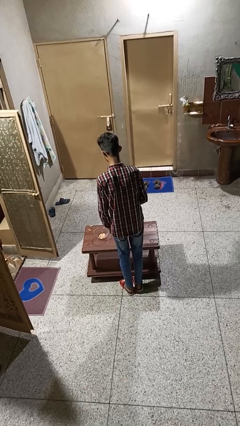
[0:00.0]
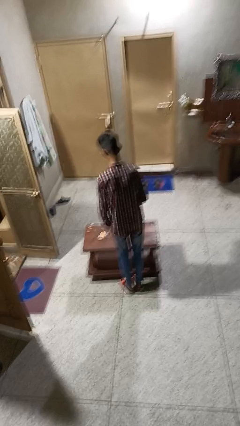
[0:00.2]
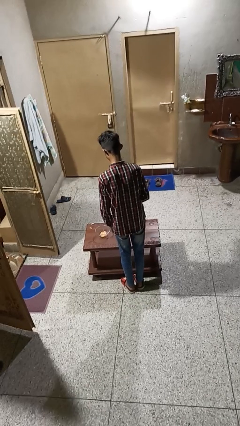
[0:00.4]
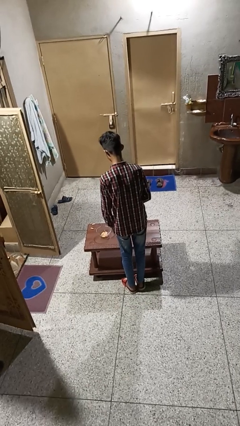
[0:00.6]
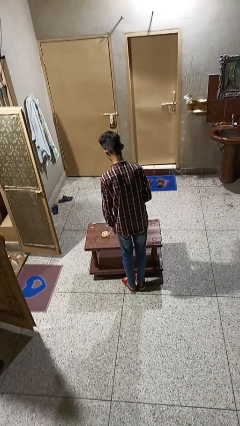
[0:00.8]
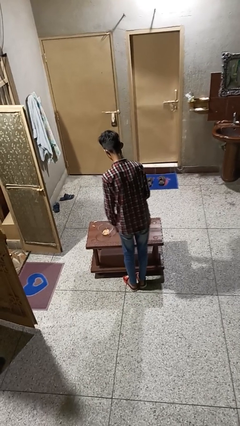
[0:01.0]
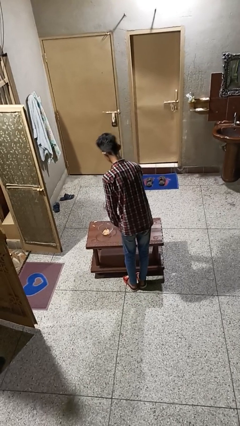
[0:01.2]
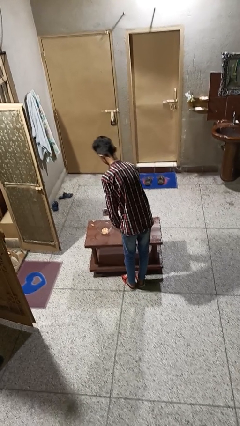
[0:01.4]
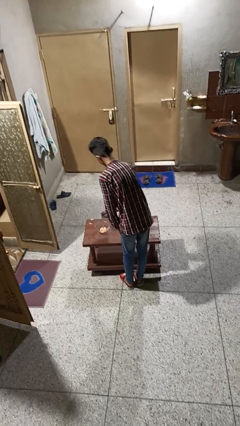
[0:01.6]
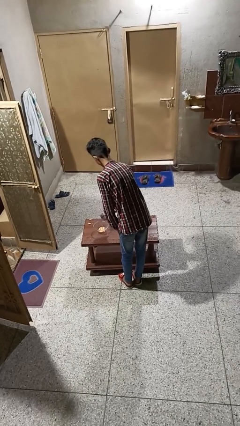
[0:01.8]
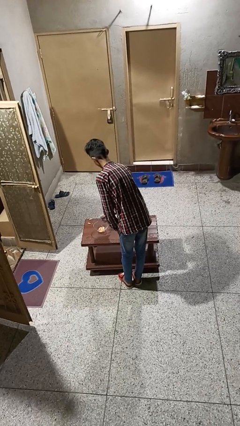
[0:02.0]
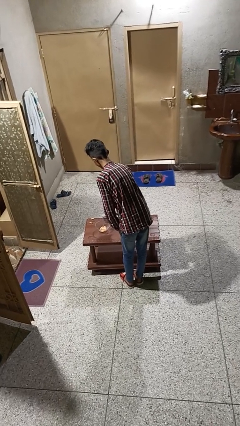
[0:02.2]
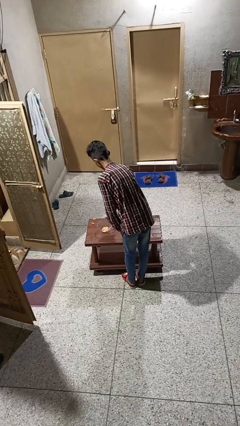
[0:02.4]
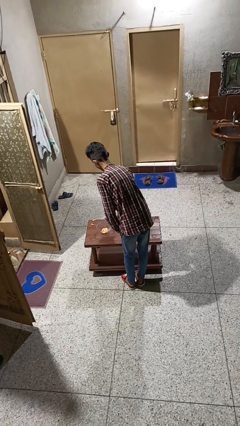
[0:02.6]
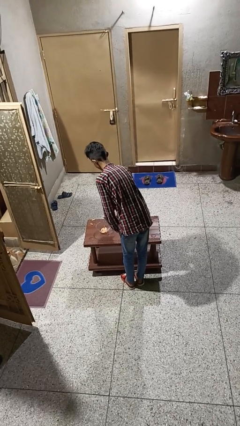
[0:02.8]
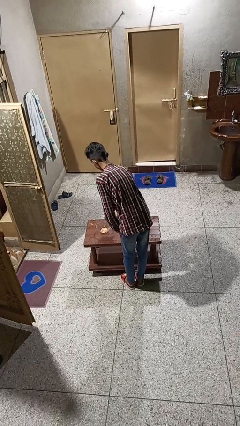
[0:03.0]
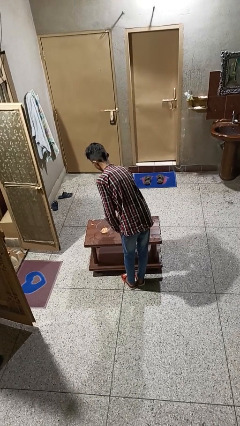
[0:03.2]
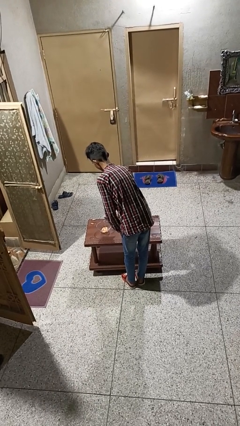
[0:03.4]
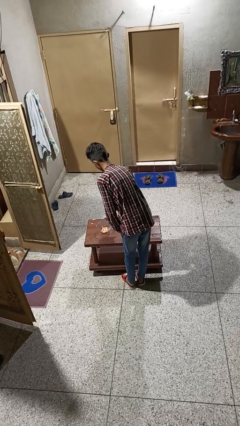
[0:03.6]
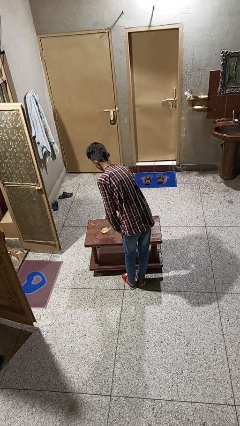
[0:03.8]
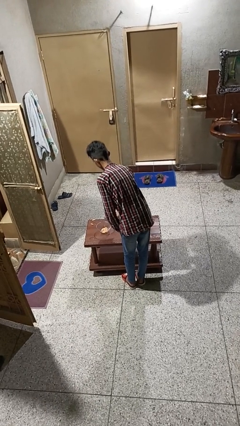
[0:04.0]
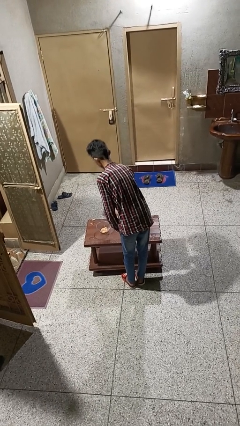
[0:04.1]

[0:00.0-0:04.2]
person pours into bowl

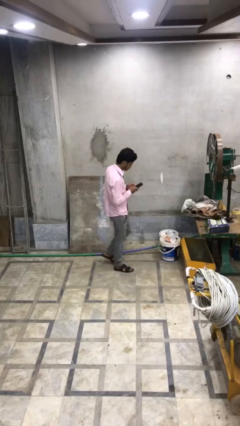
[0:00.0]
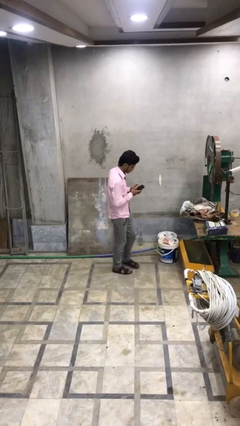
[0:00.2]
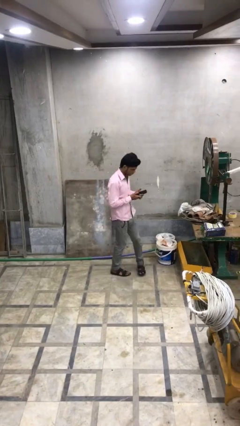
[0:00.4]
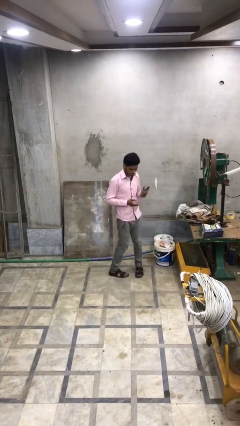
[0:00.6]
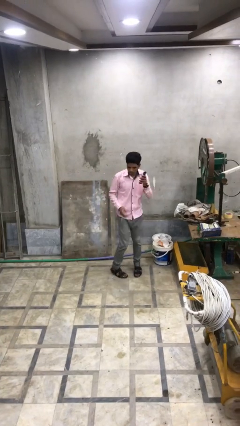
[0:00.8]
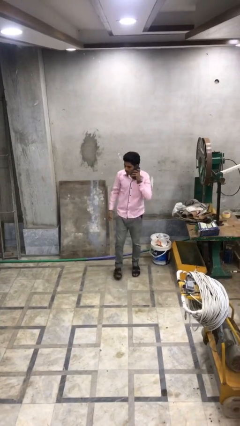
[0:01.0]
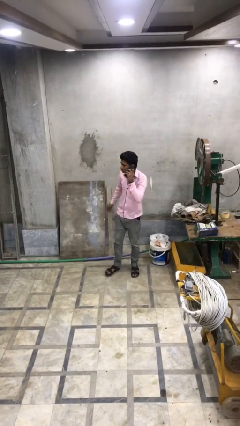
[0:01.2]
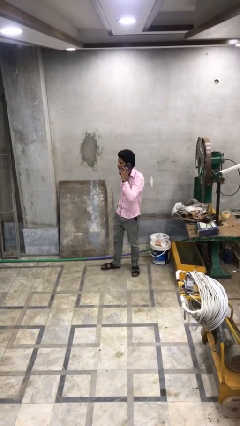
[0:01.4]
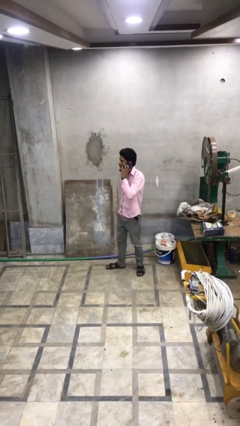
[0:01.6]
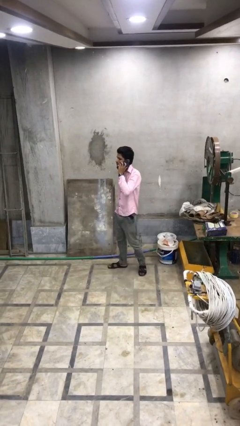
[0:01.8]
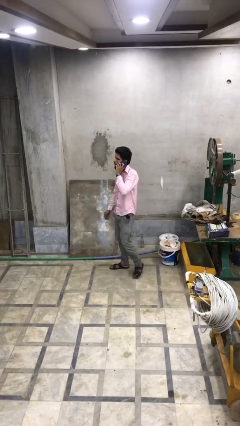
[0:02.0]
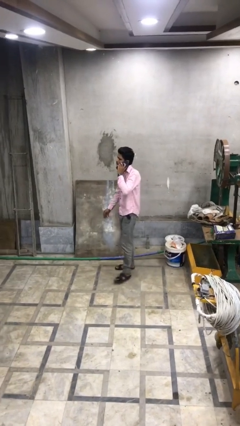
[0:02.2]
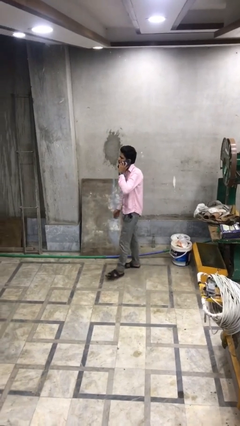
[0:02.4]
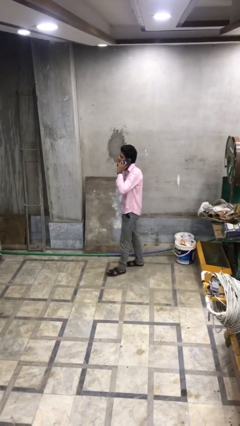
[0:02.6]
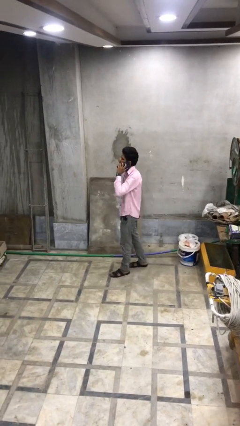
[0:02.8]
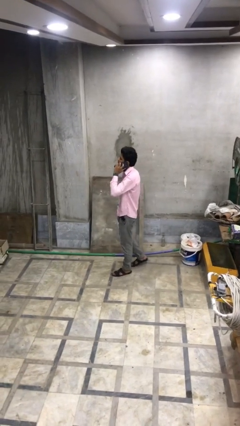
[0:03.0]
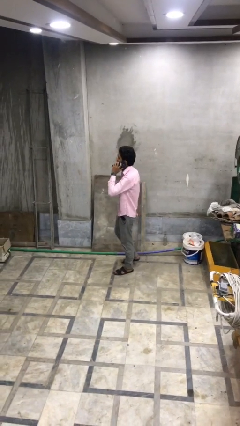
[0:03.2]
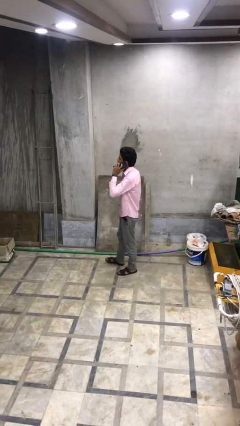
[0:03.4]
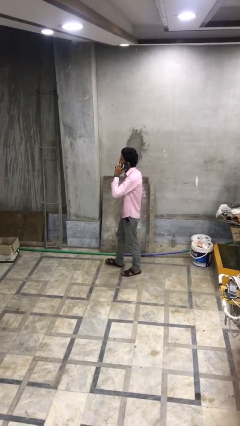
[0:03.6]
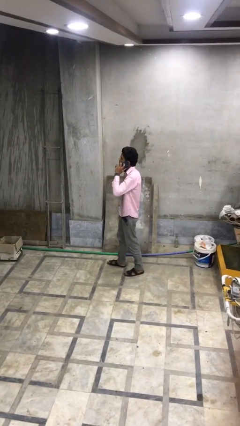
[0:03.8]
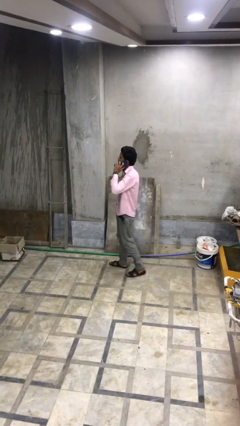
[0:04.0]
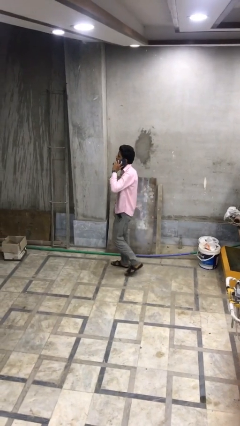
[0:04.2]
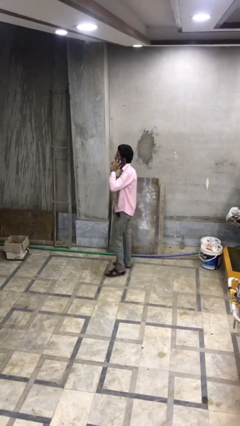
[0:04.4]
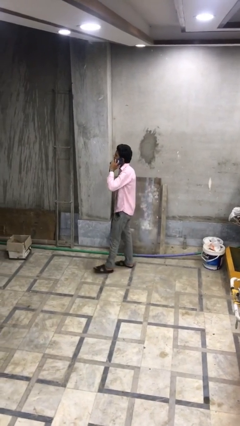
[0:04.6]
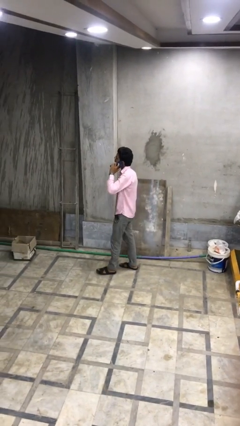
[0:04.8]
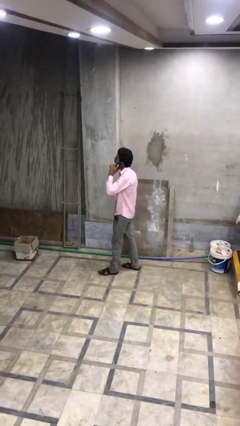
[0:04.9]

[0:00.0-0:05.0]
person talks on phone

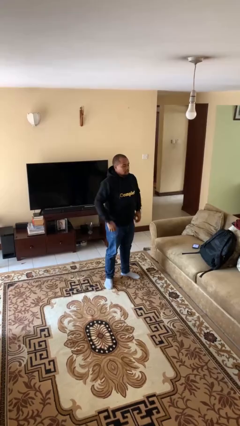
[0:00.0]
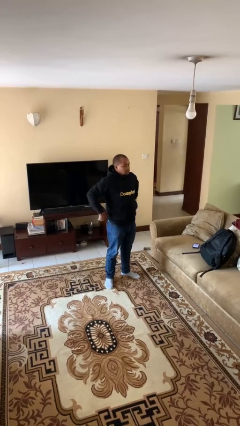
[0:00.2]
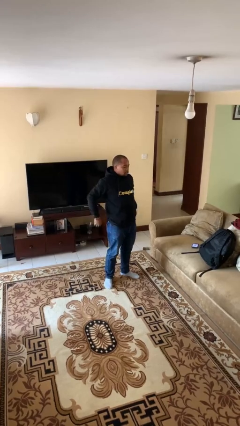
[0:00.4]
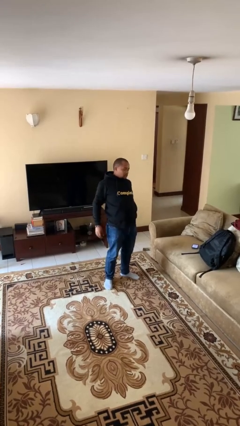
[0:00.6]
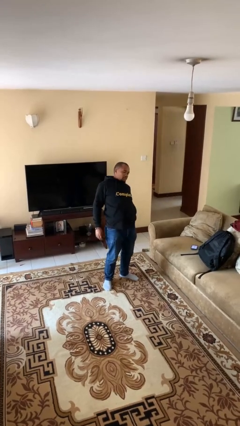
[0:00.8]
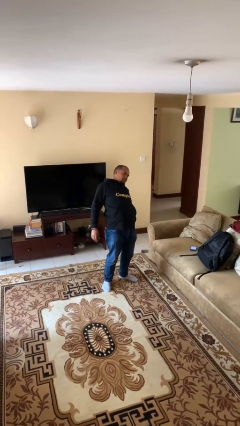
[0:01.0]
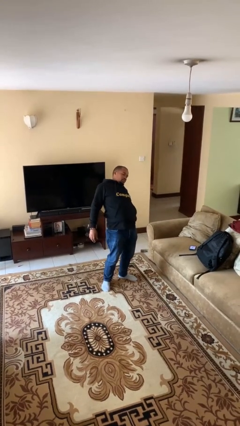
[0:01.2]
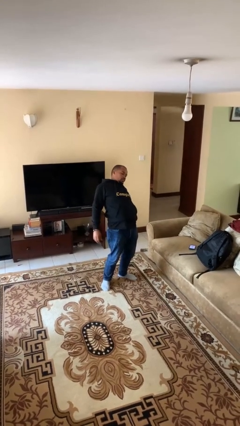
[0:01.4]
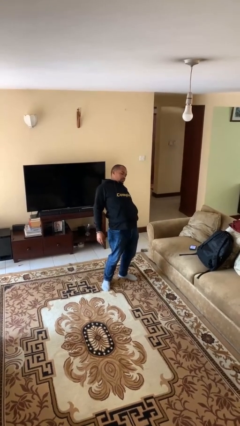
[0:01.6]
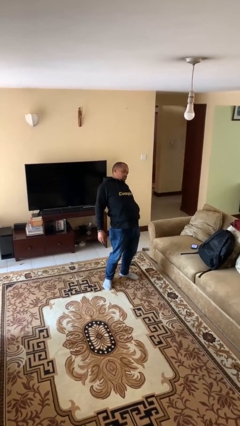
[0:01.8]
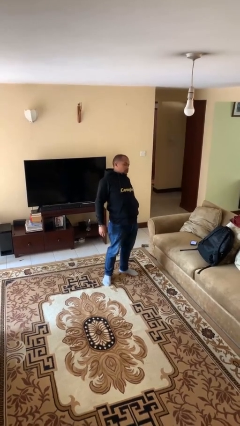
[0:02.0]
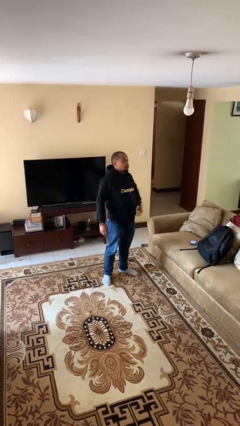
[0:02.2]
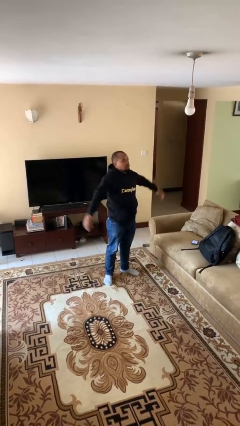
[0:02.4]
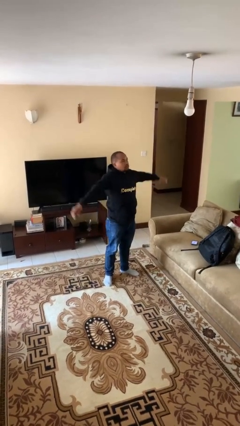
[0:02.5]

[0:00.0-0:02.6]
person stretches back

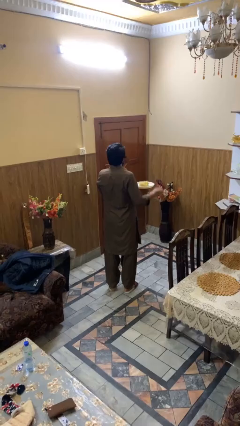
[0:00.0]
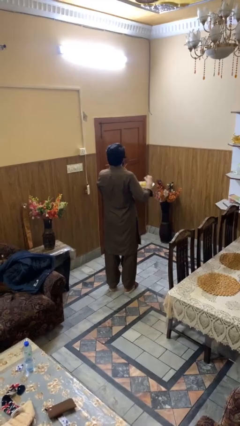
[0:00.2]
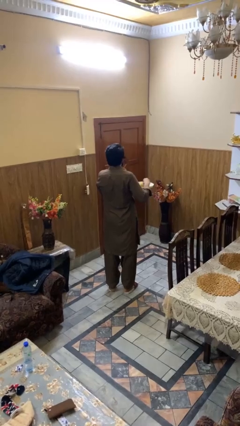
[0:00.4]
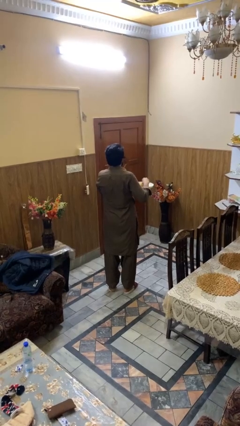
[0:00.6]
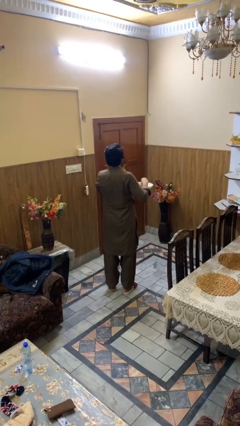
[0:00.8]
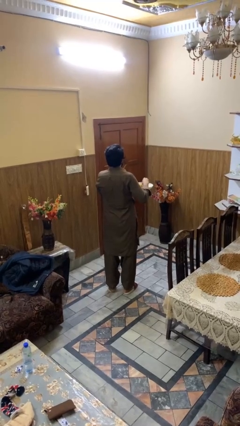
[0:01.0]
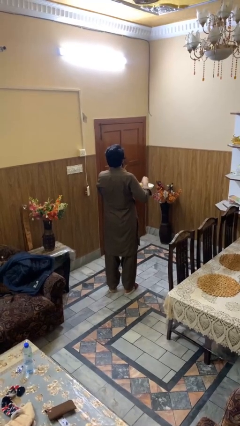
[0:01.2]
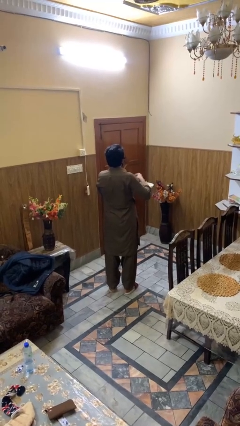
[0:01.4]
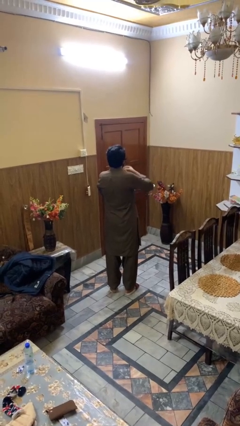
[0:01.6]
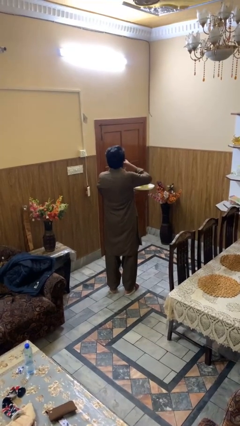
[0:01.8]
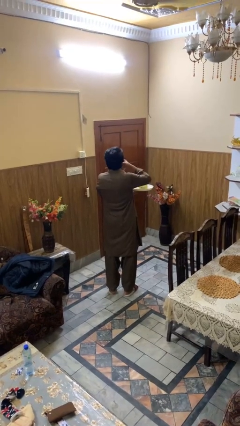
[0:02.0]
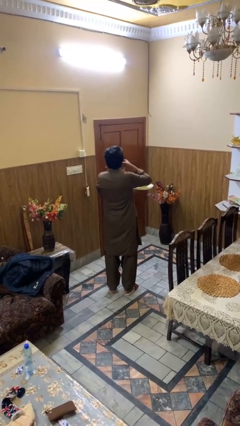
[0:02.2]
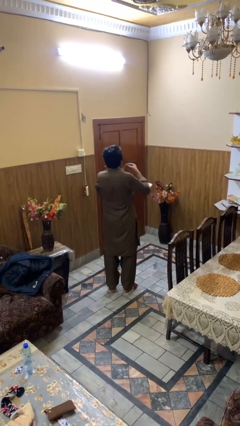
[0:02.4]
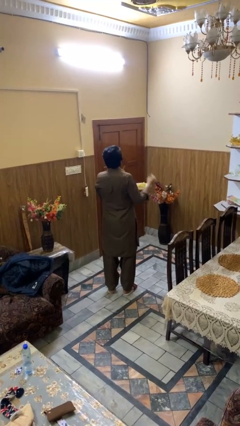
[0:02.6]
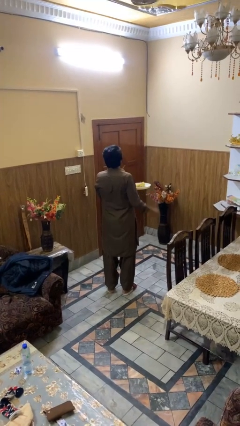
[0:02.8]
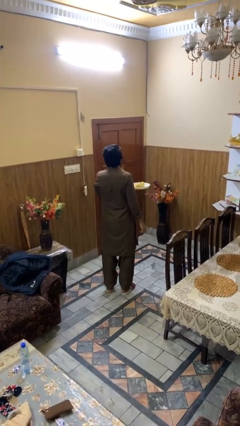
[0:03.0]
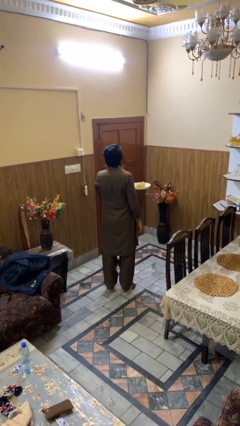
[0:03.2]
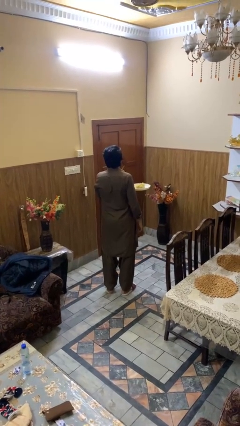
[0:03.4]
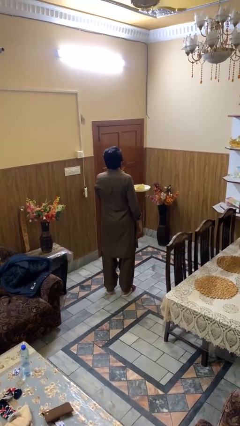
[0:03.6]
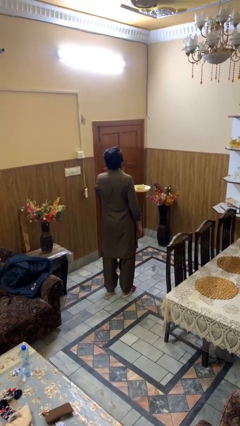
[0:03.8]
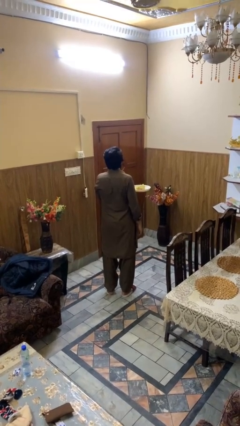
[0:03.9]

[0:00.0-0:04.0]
person eats with hands

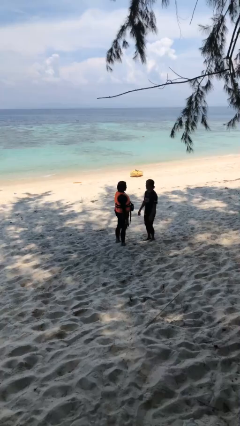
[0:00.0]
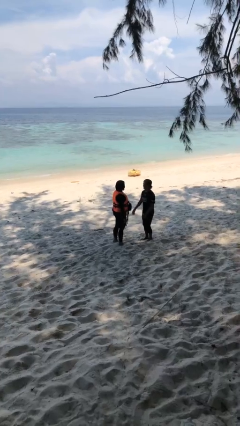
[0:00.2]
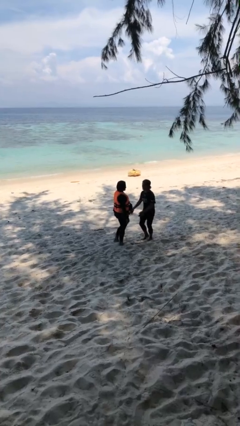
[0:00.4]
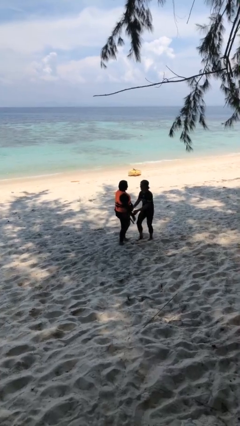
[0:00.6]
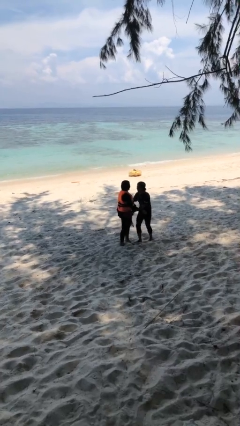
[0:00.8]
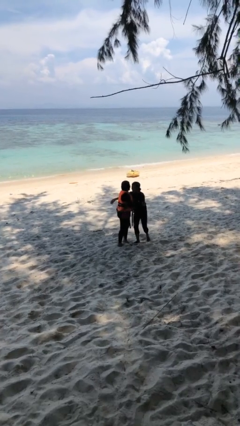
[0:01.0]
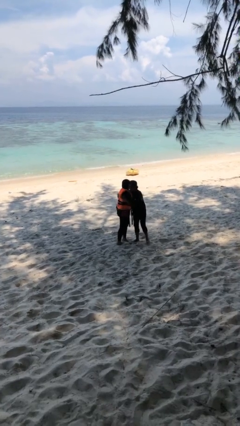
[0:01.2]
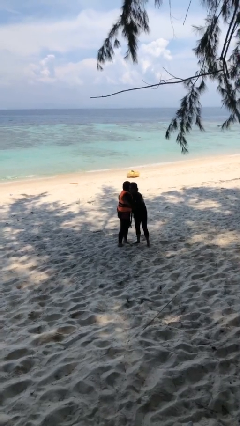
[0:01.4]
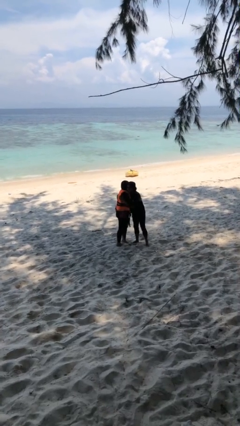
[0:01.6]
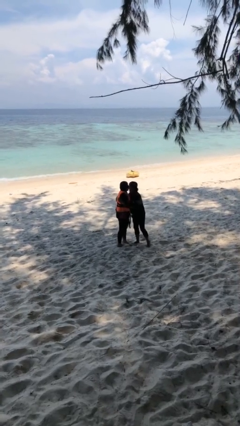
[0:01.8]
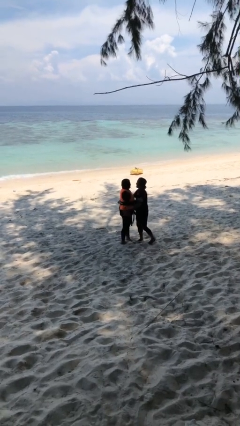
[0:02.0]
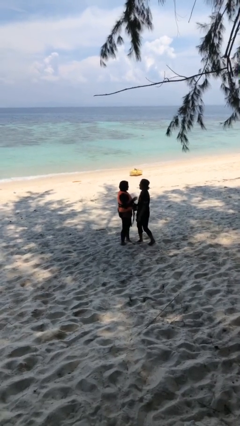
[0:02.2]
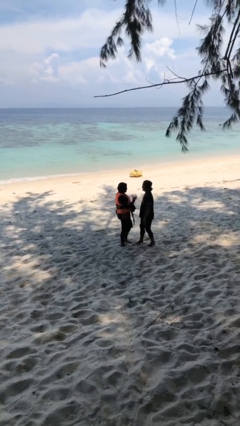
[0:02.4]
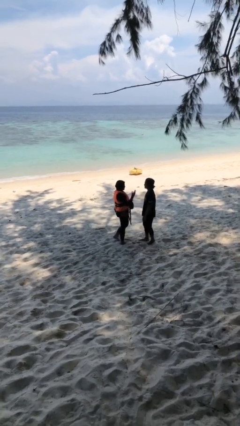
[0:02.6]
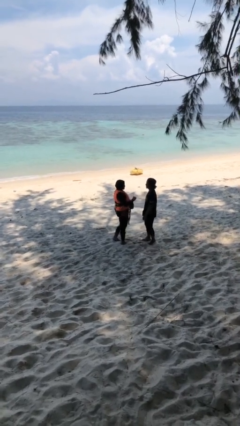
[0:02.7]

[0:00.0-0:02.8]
person embraces person
